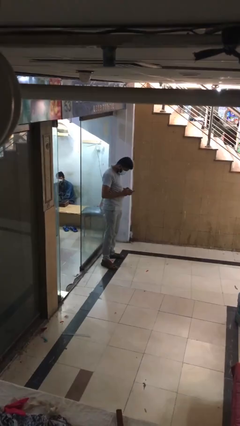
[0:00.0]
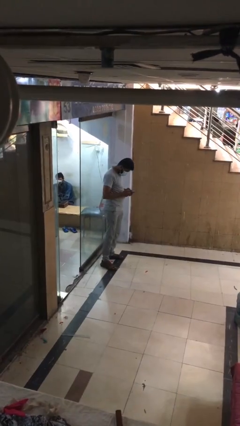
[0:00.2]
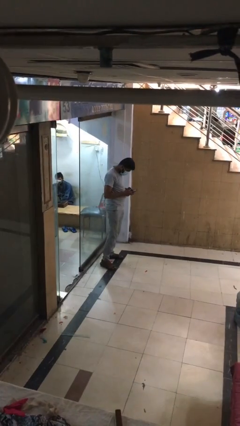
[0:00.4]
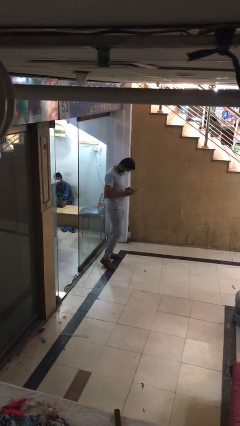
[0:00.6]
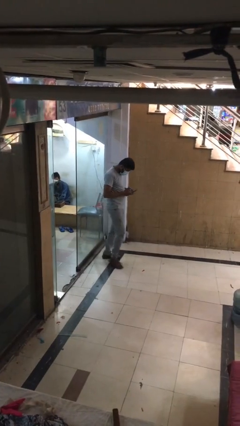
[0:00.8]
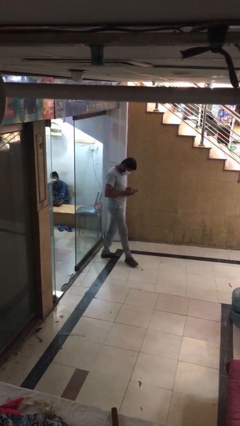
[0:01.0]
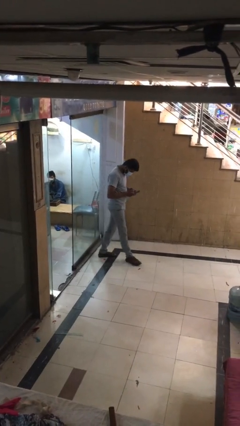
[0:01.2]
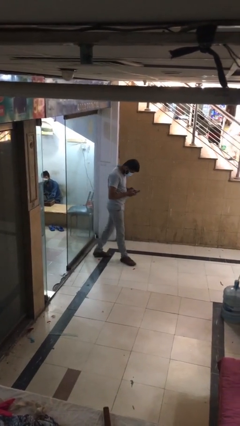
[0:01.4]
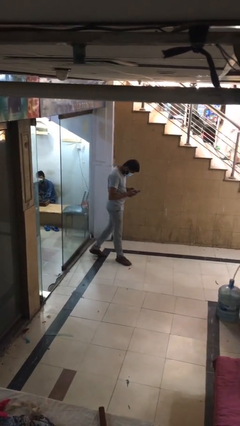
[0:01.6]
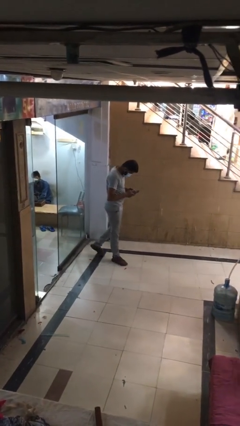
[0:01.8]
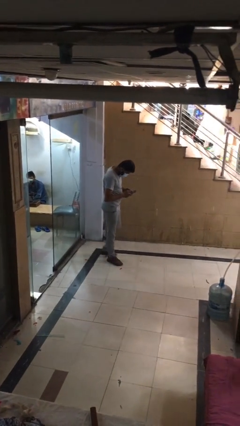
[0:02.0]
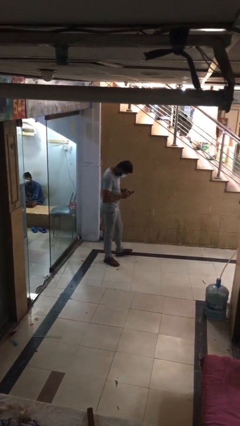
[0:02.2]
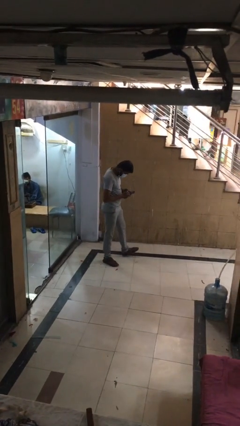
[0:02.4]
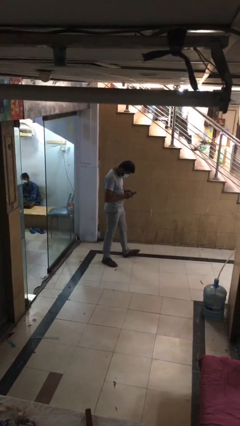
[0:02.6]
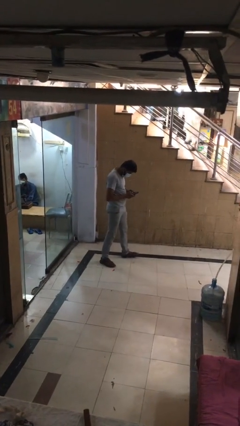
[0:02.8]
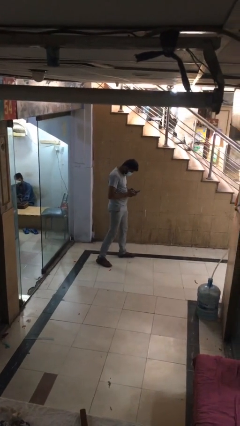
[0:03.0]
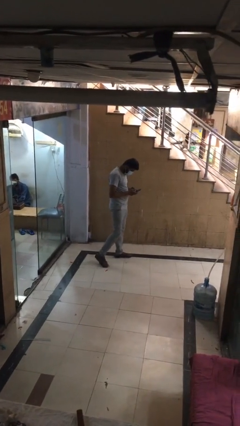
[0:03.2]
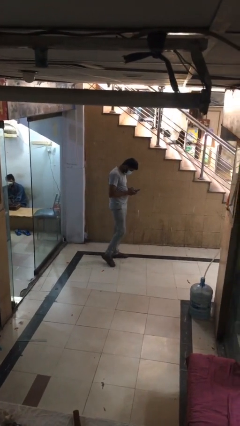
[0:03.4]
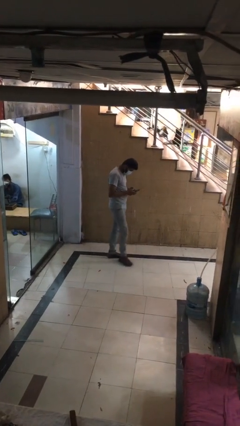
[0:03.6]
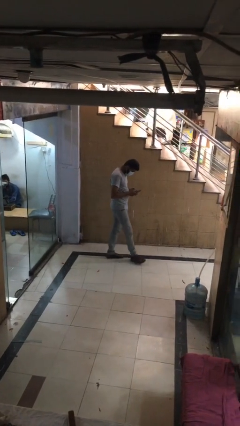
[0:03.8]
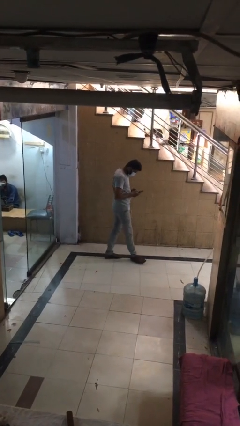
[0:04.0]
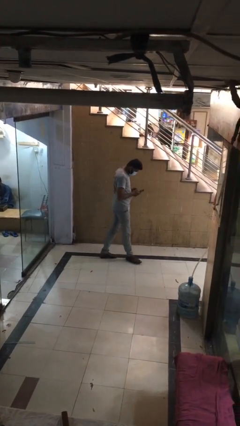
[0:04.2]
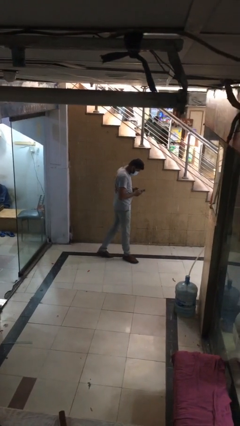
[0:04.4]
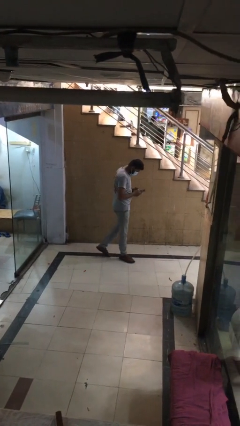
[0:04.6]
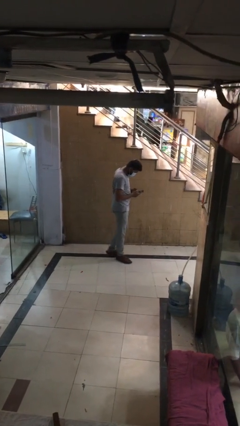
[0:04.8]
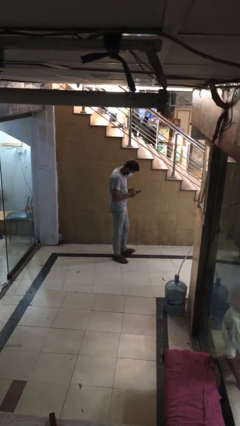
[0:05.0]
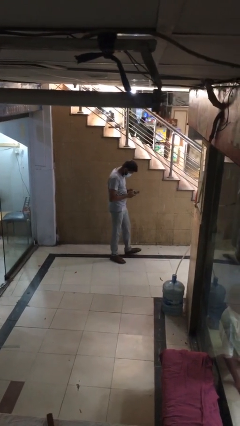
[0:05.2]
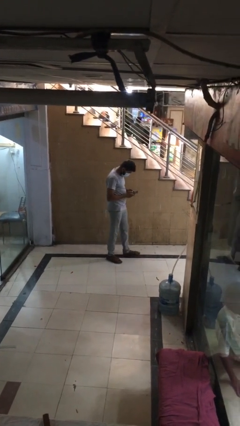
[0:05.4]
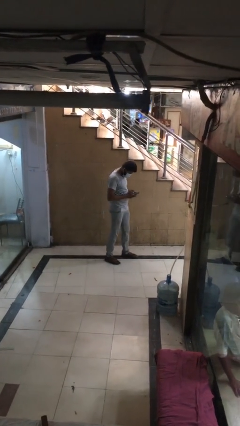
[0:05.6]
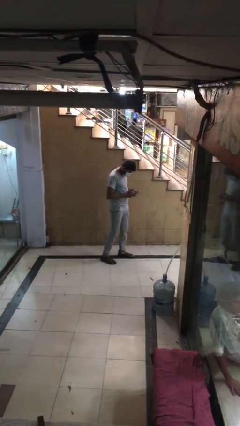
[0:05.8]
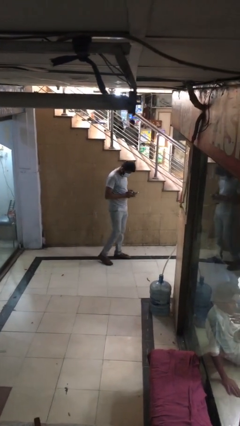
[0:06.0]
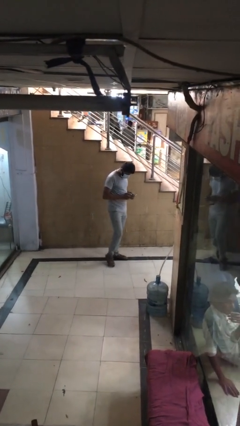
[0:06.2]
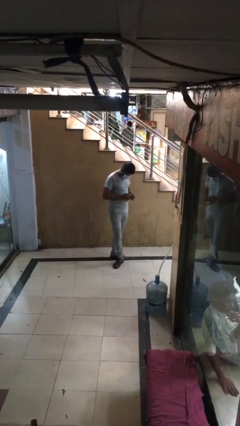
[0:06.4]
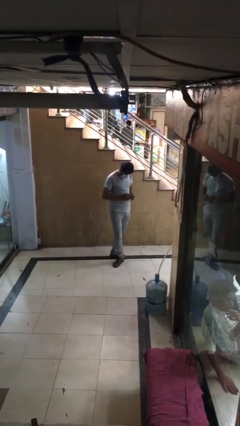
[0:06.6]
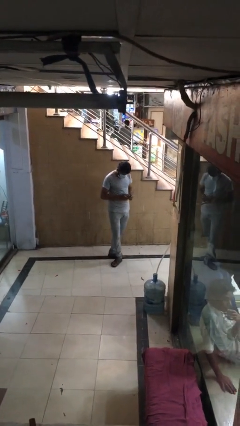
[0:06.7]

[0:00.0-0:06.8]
person texts on phone

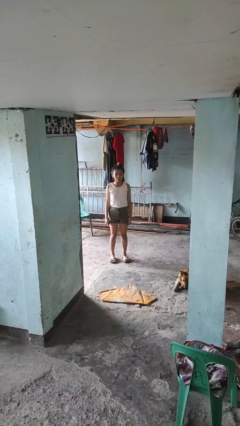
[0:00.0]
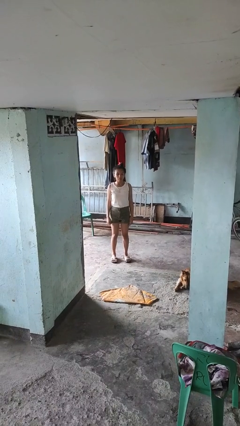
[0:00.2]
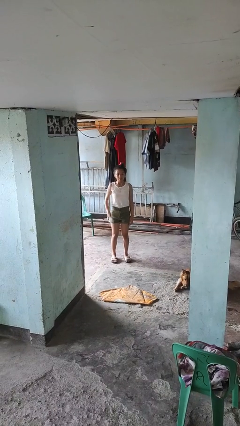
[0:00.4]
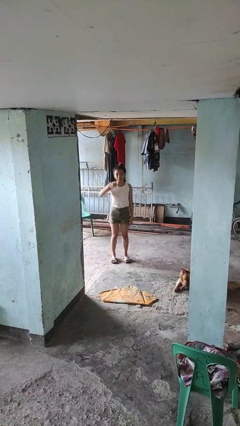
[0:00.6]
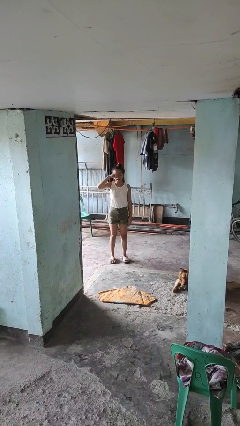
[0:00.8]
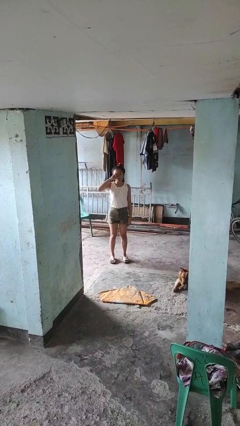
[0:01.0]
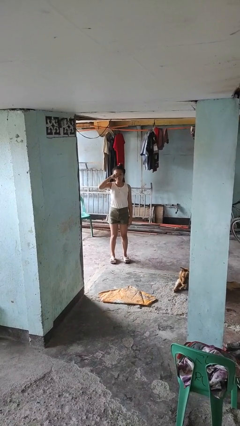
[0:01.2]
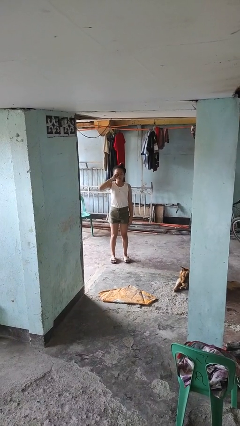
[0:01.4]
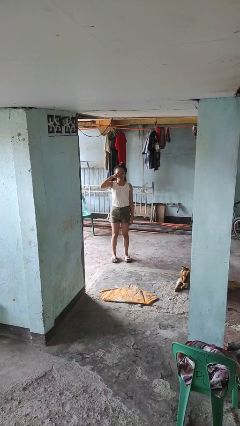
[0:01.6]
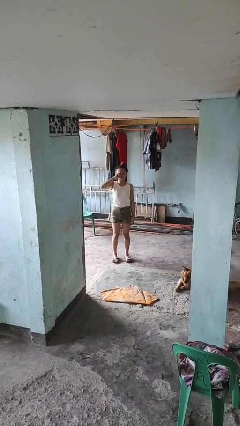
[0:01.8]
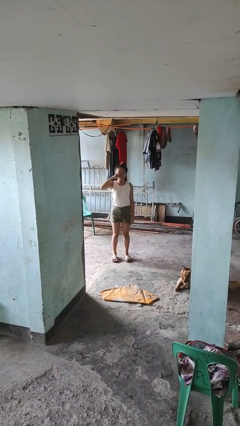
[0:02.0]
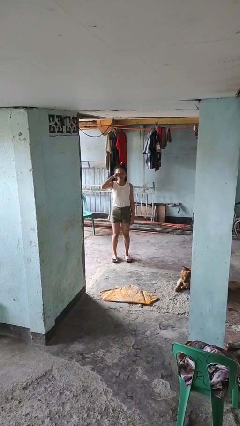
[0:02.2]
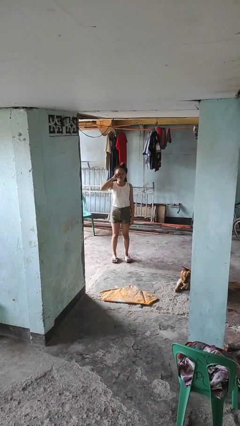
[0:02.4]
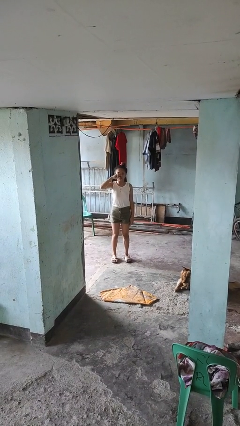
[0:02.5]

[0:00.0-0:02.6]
person rubs eyes

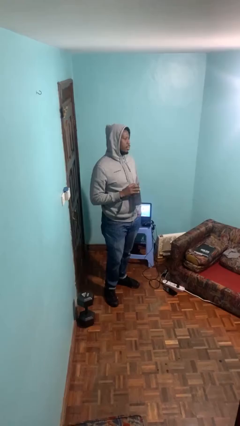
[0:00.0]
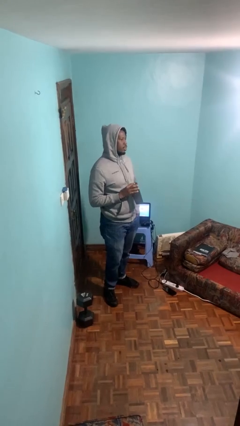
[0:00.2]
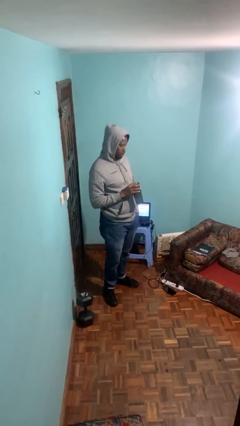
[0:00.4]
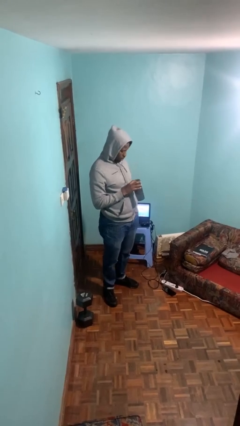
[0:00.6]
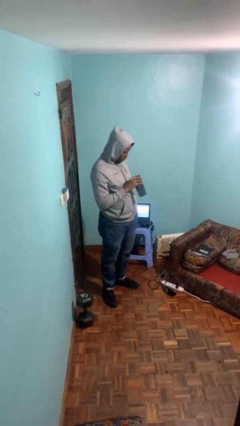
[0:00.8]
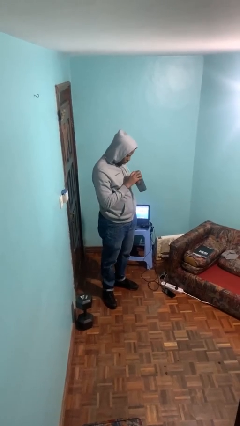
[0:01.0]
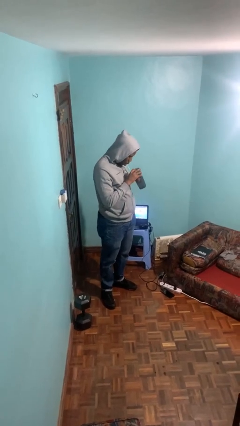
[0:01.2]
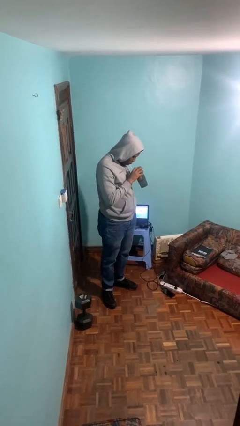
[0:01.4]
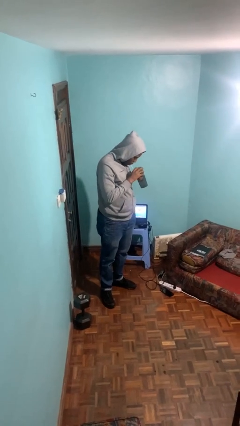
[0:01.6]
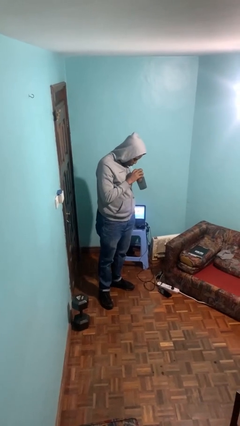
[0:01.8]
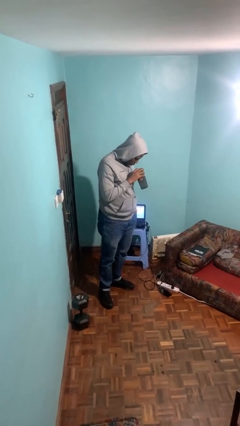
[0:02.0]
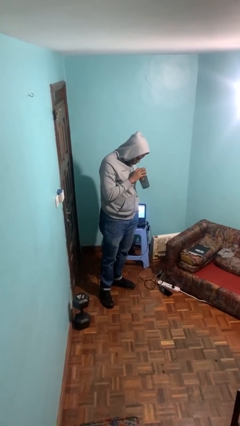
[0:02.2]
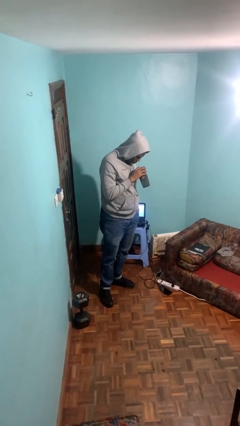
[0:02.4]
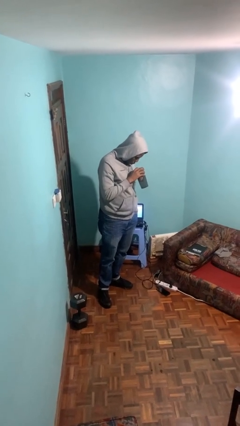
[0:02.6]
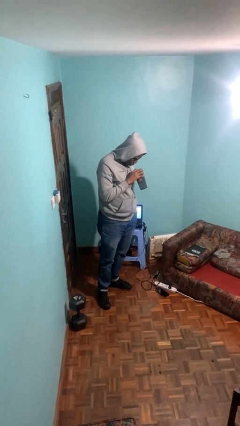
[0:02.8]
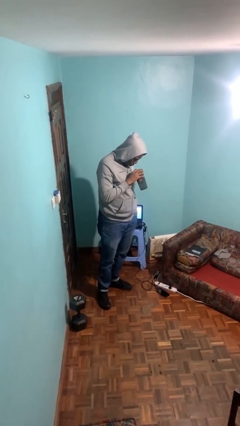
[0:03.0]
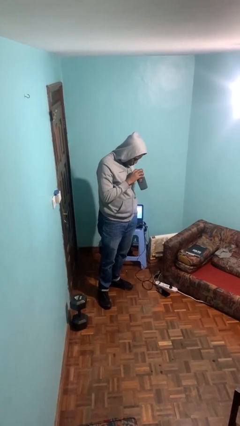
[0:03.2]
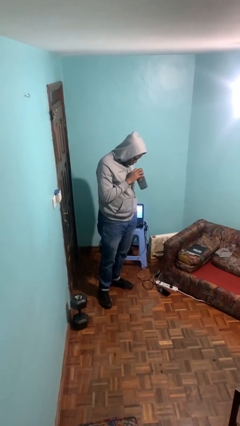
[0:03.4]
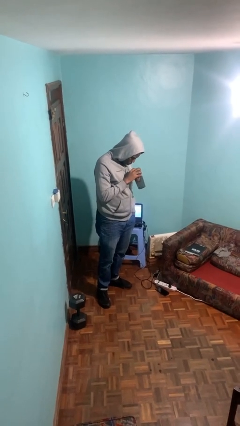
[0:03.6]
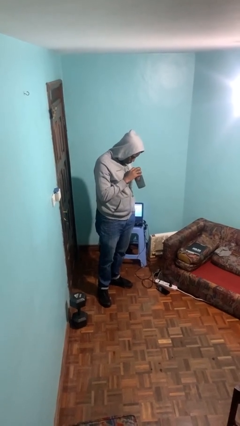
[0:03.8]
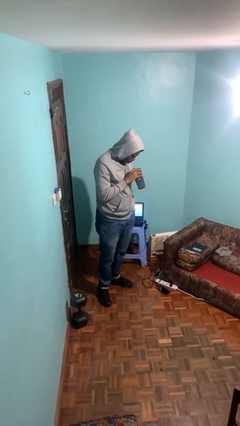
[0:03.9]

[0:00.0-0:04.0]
person drinks from straw

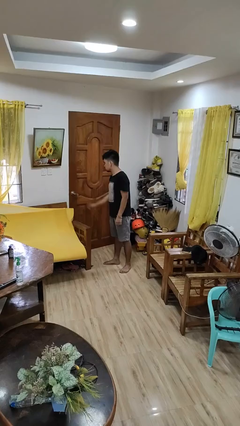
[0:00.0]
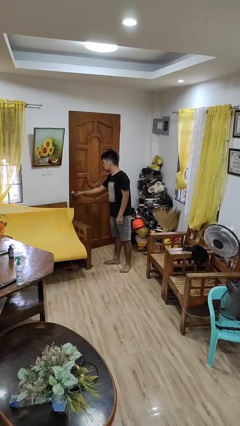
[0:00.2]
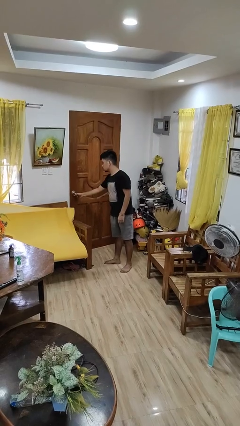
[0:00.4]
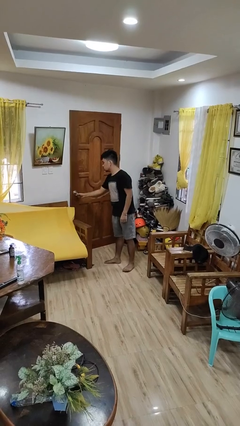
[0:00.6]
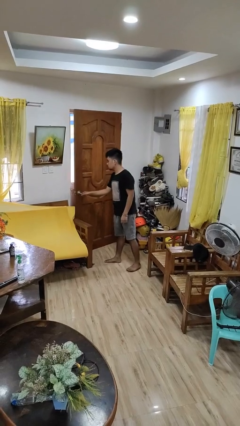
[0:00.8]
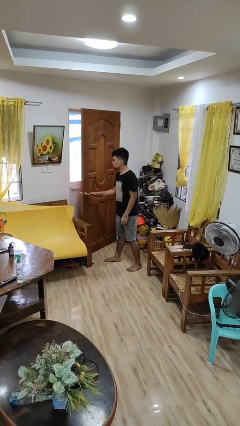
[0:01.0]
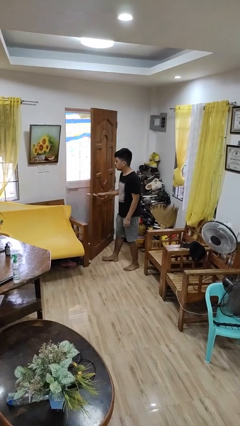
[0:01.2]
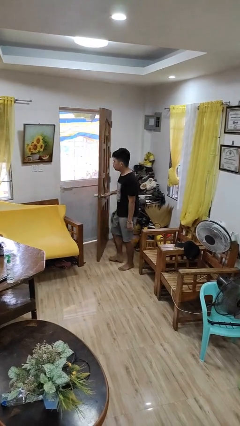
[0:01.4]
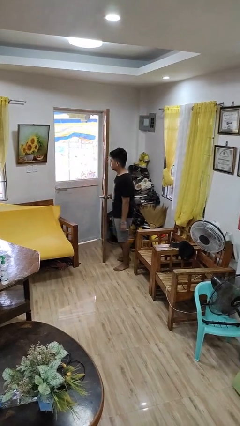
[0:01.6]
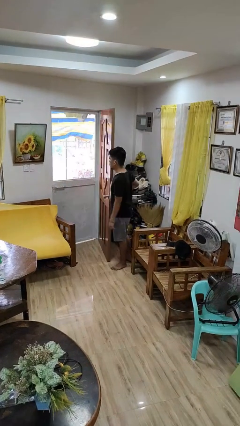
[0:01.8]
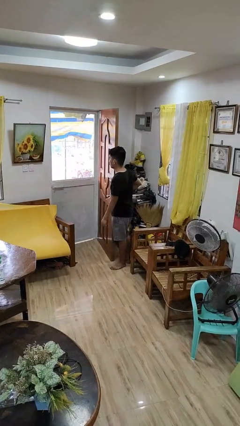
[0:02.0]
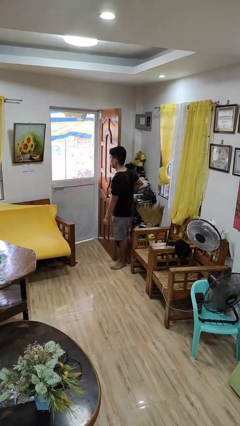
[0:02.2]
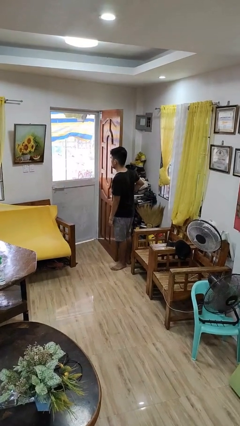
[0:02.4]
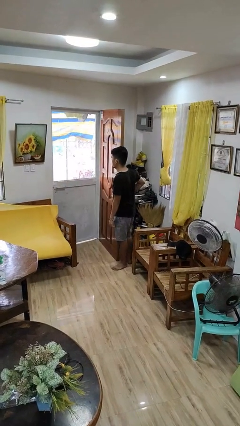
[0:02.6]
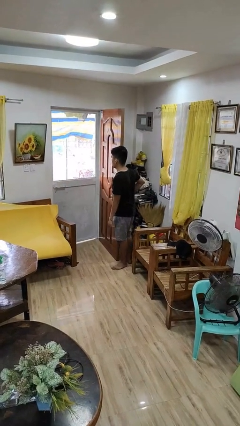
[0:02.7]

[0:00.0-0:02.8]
person opens facility door

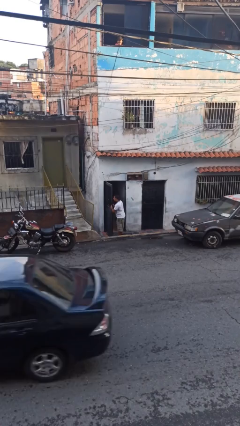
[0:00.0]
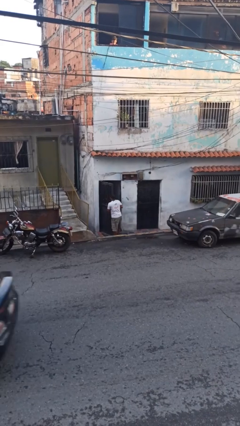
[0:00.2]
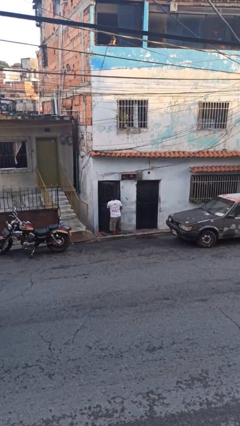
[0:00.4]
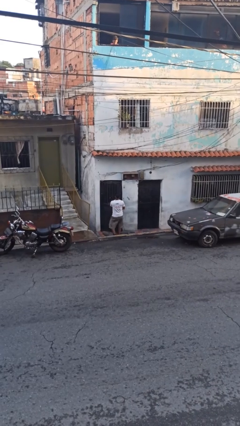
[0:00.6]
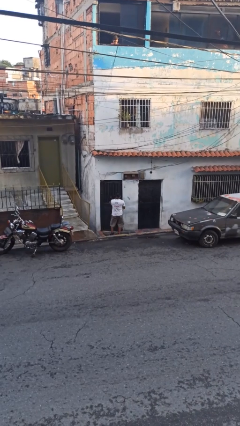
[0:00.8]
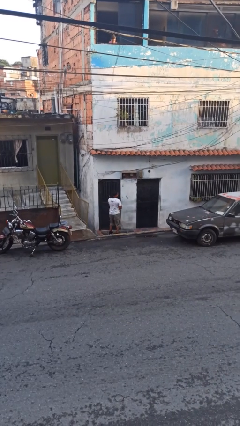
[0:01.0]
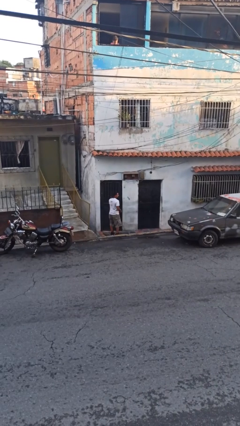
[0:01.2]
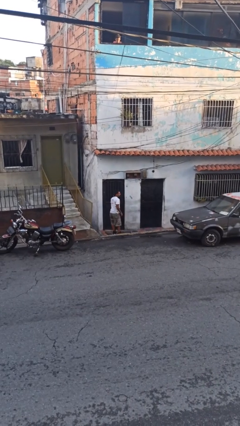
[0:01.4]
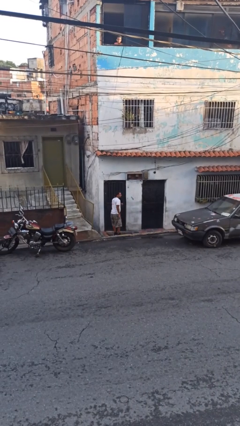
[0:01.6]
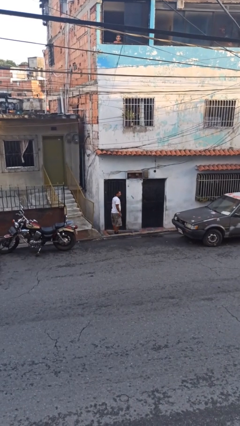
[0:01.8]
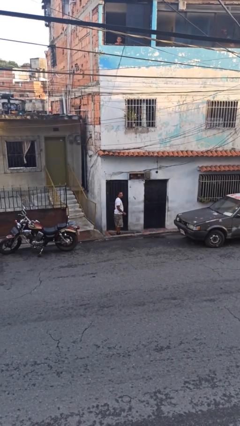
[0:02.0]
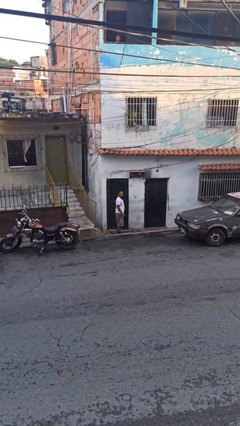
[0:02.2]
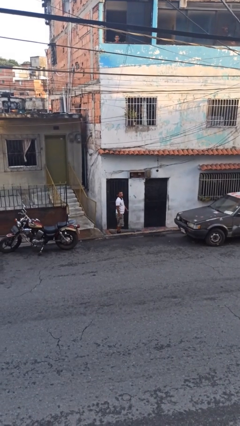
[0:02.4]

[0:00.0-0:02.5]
person closes facility door
